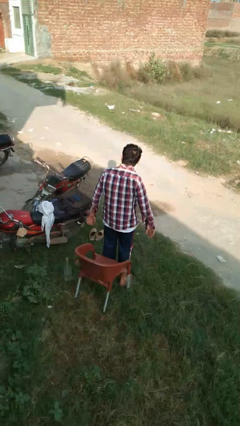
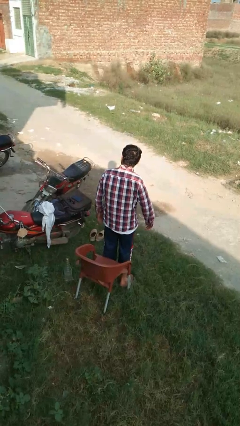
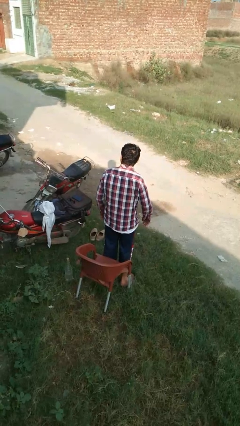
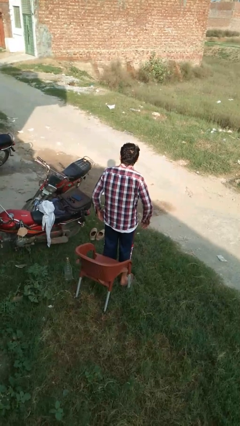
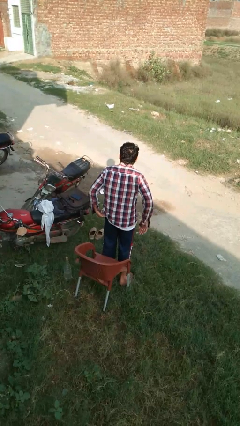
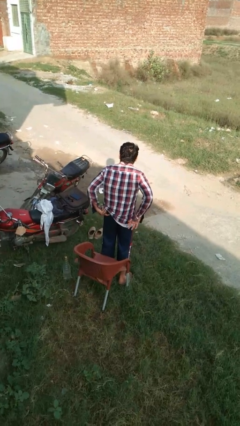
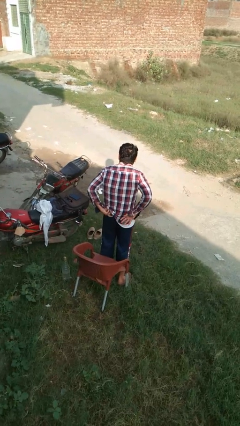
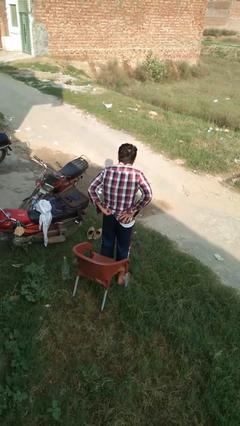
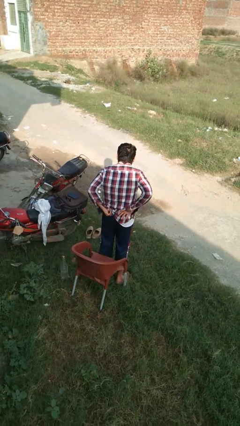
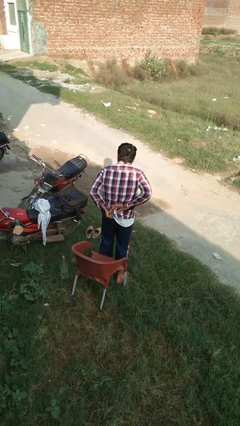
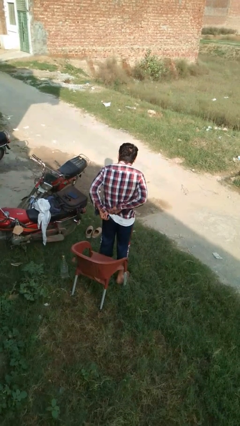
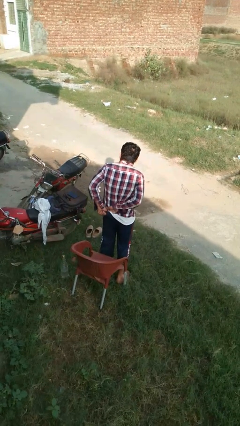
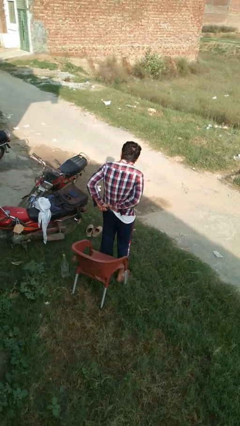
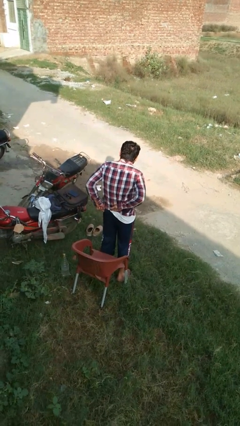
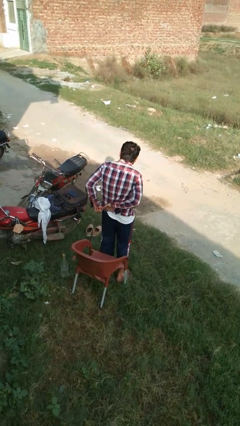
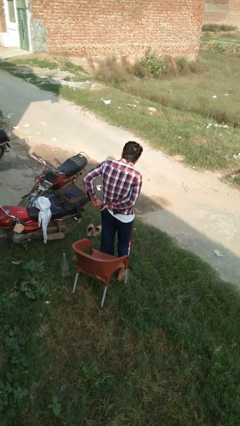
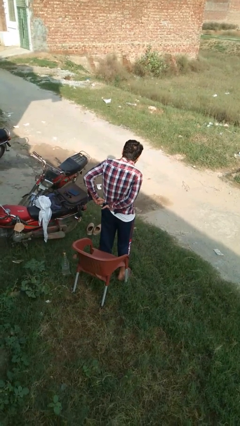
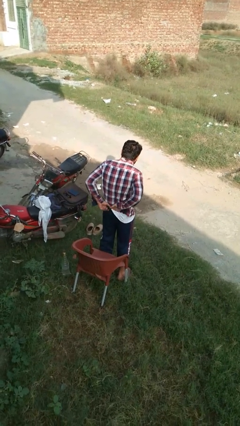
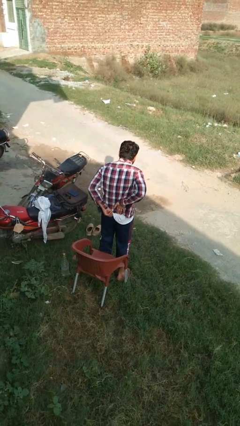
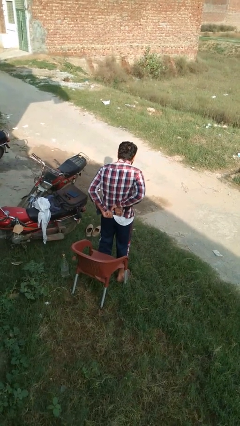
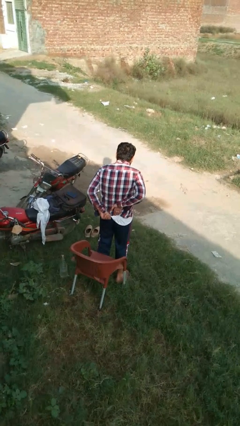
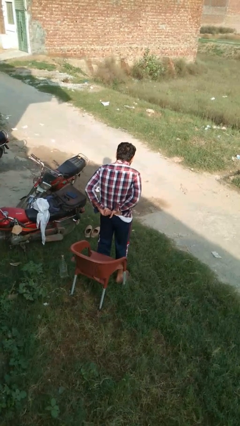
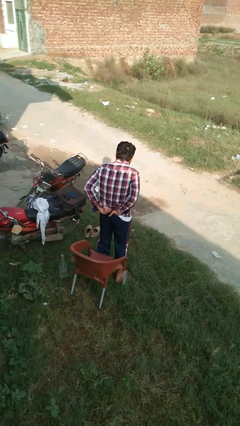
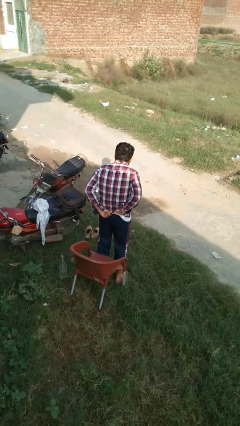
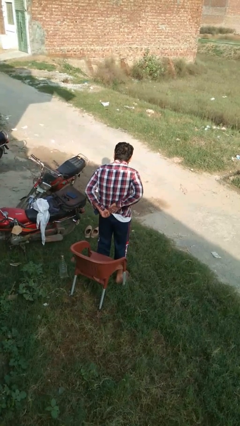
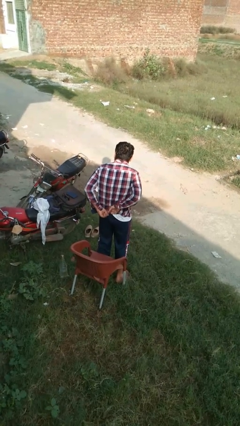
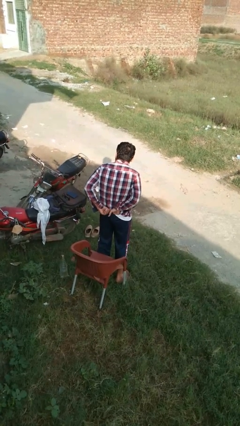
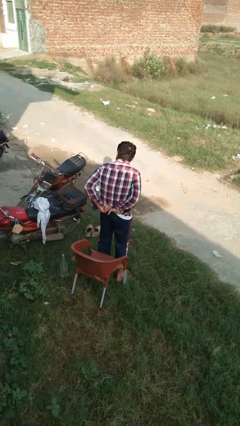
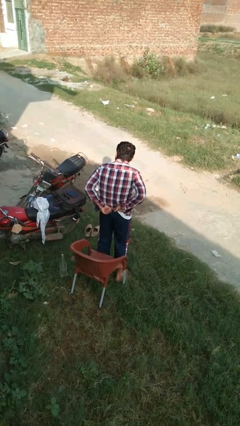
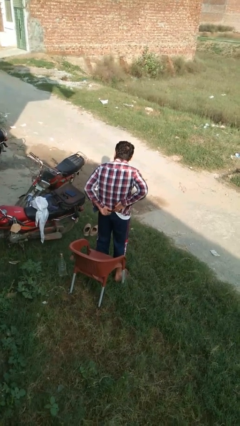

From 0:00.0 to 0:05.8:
person tucks in shirt

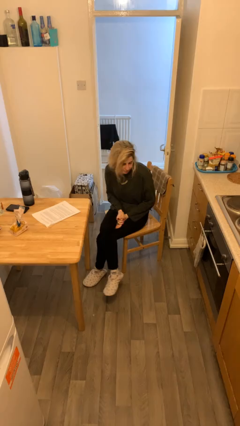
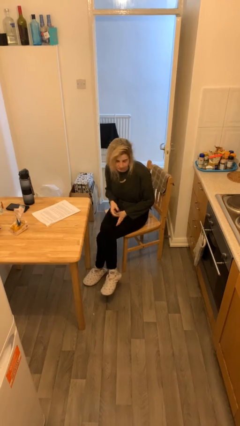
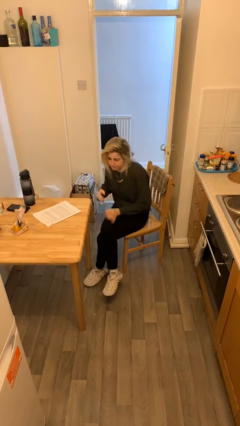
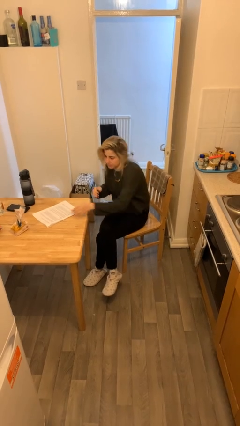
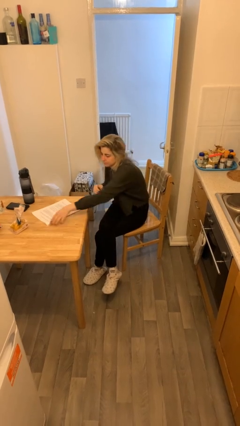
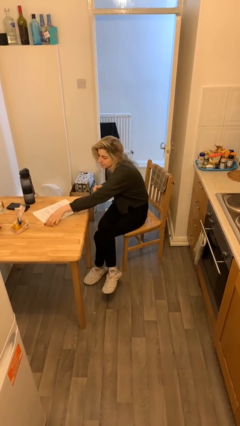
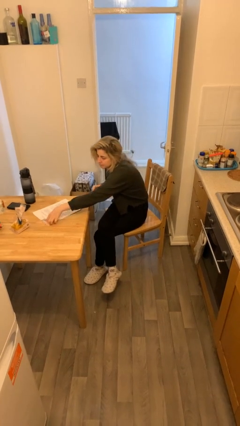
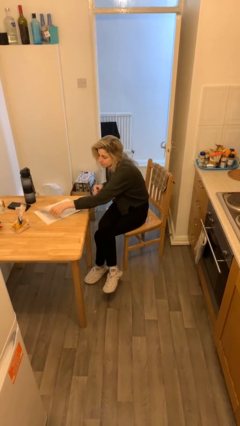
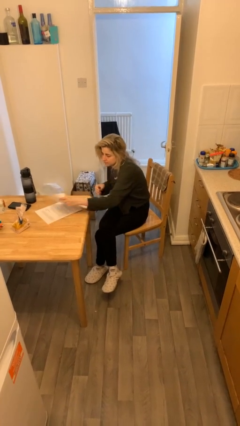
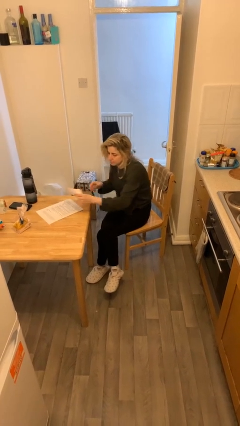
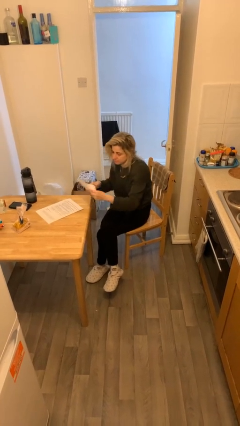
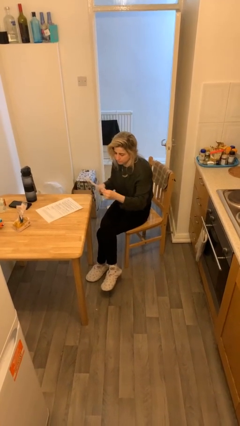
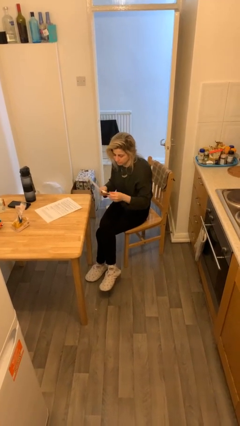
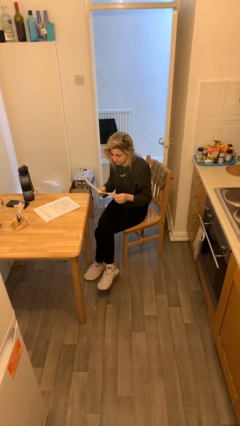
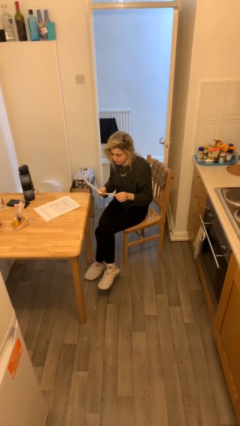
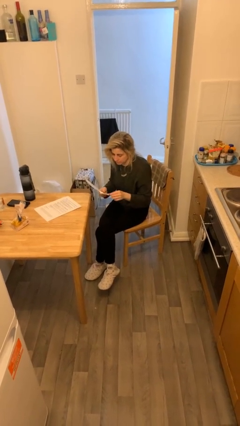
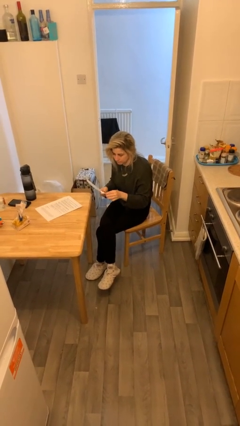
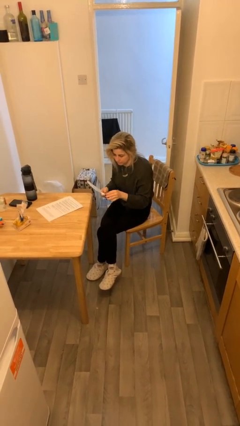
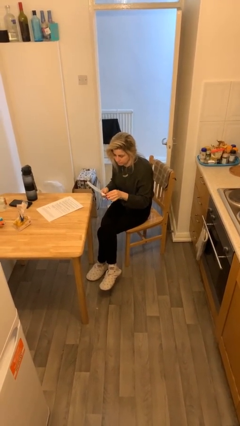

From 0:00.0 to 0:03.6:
person picks up object from table

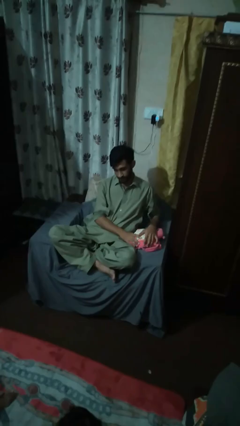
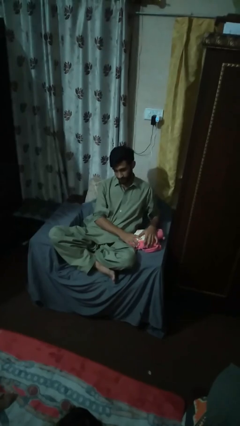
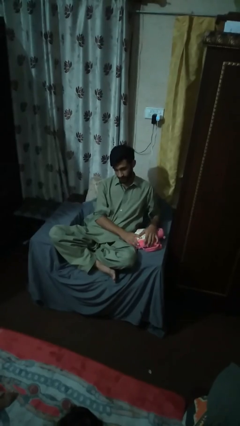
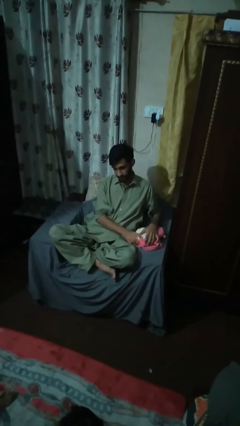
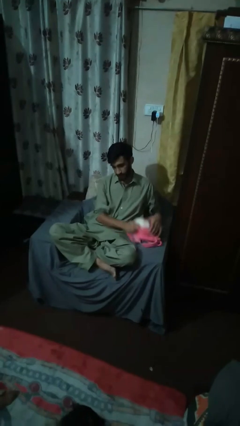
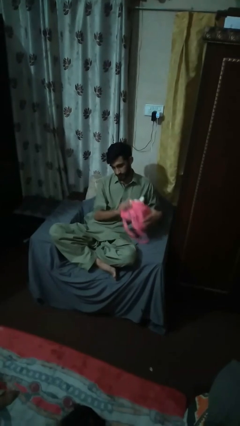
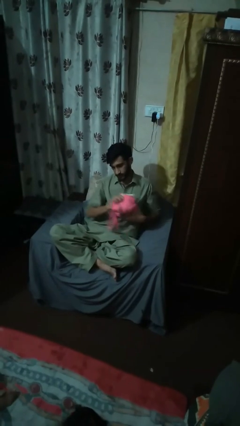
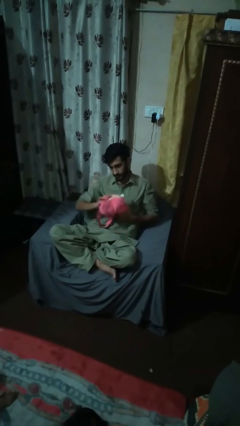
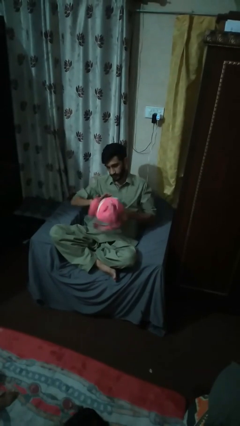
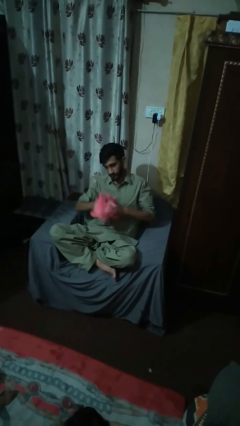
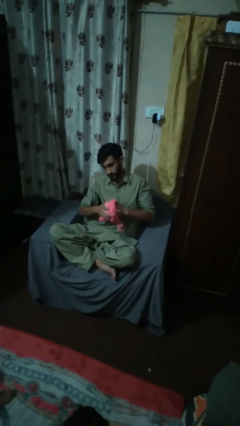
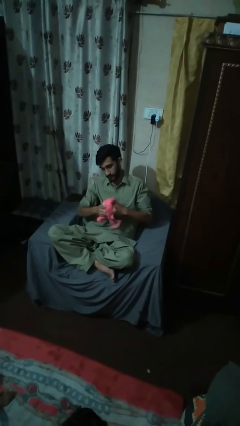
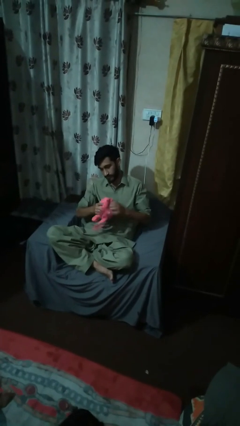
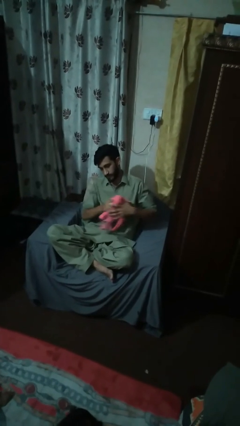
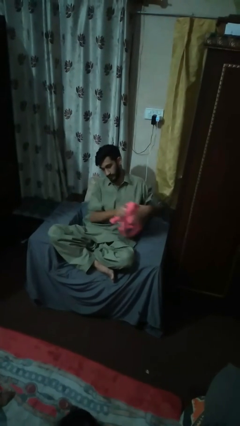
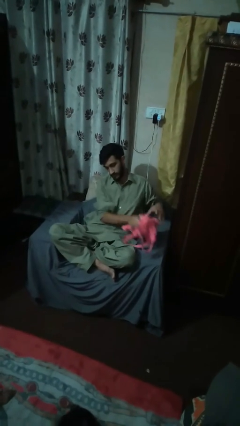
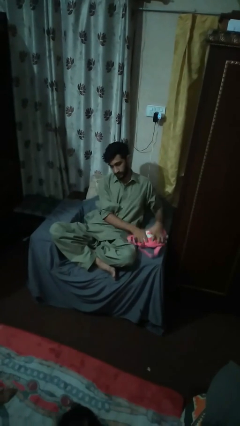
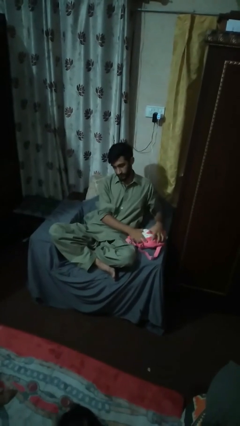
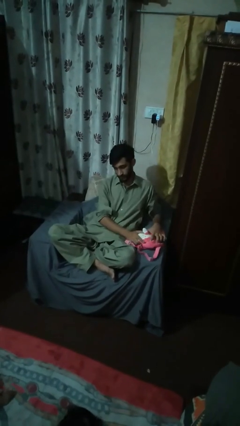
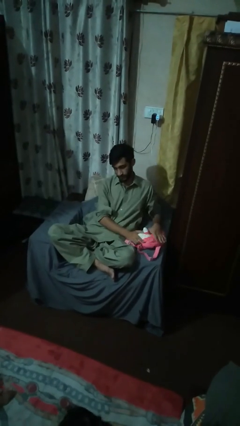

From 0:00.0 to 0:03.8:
person squeezes object

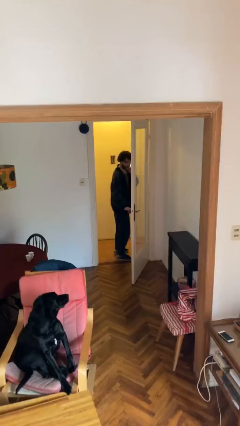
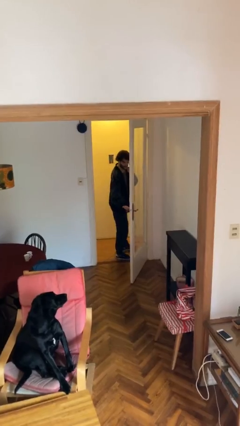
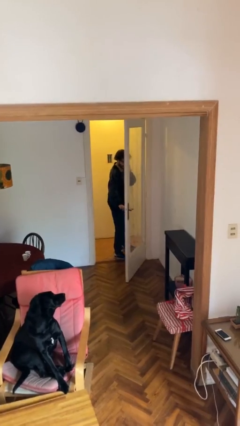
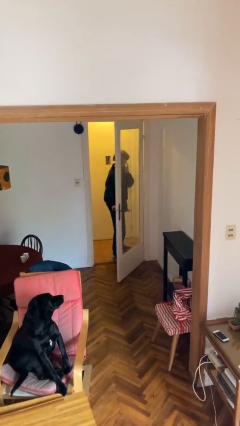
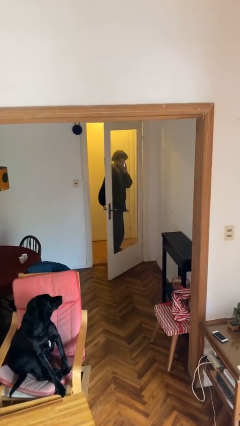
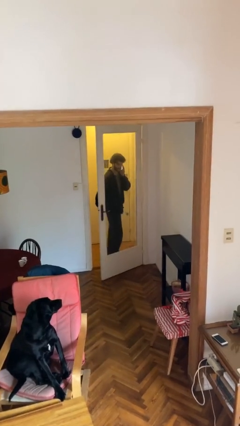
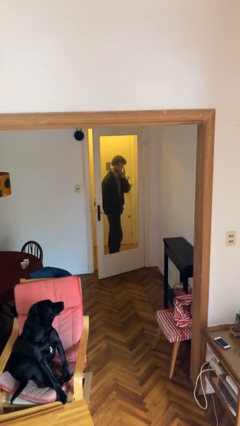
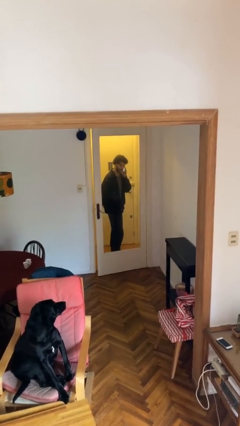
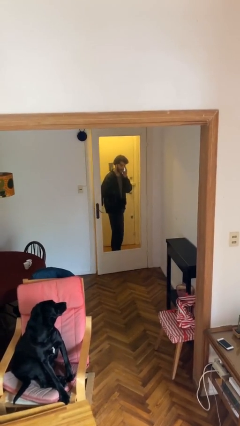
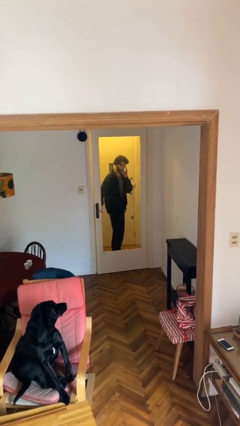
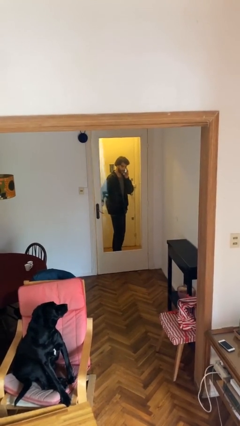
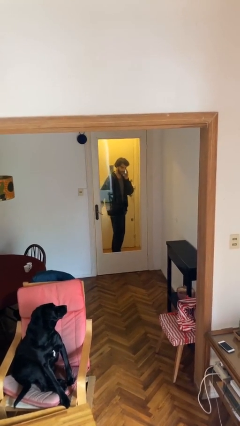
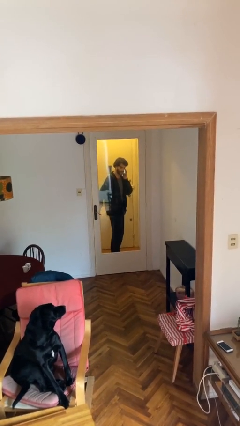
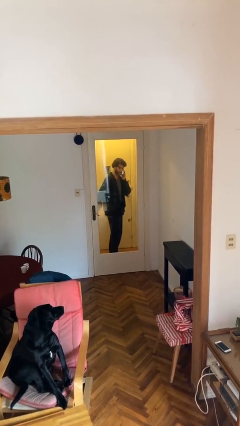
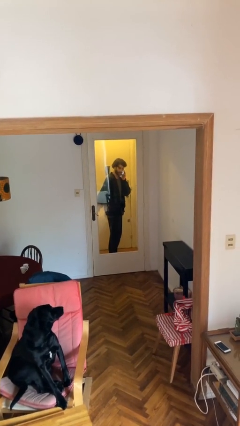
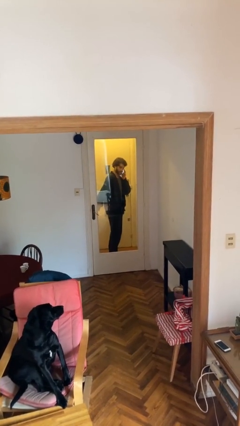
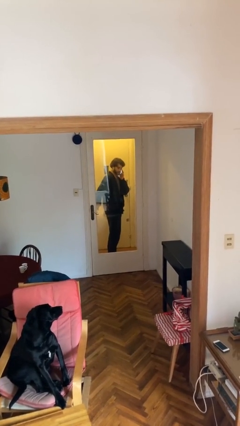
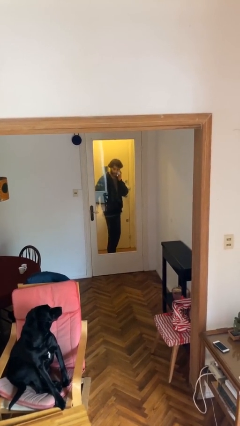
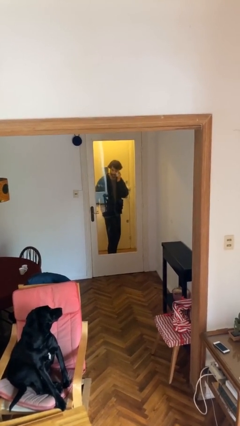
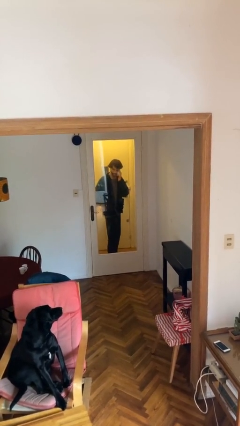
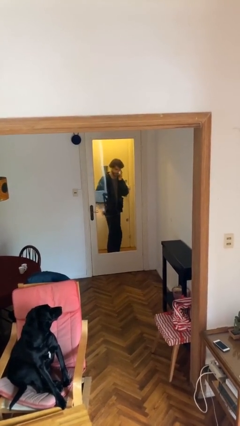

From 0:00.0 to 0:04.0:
person closes facility door

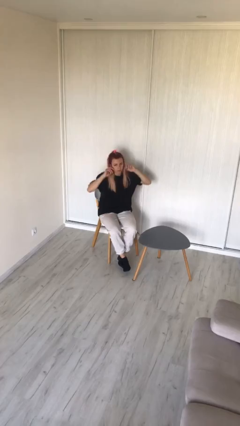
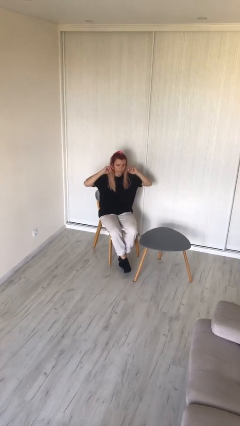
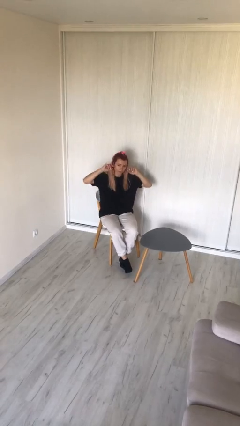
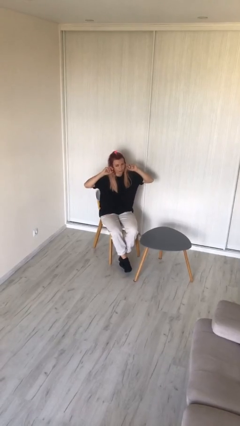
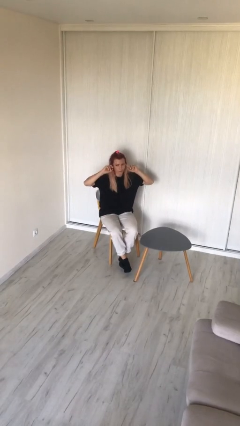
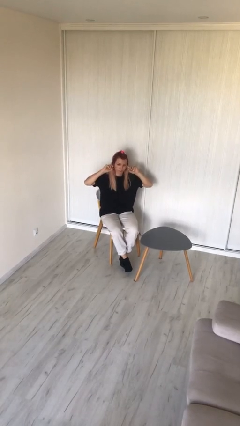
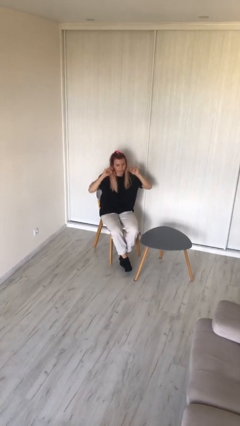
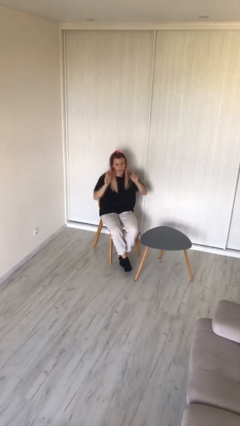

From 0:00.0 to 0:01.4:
person puts fingers in ear
